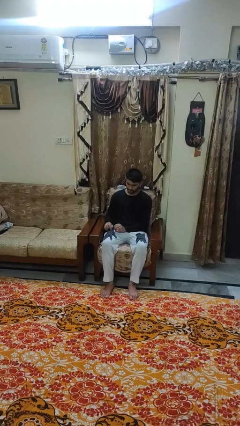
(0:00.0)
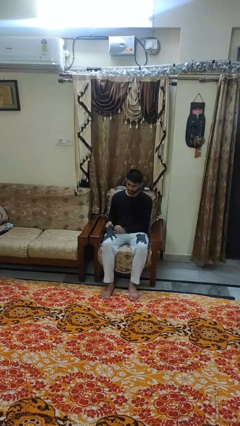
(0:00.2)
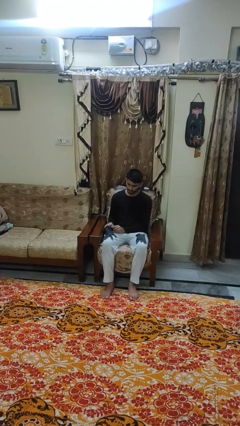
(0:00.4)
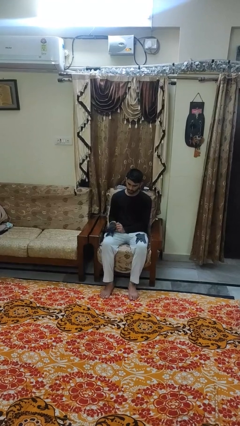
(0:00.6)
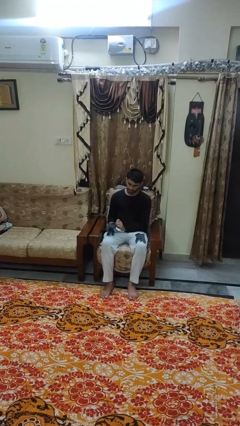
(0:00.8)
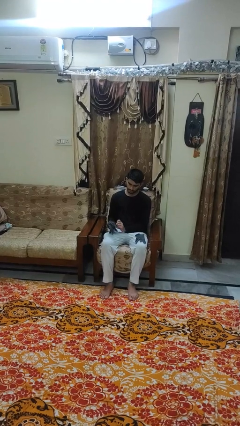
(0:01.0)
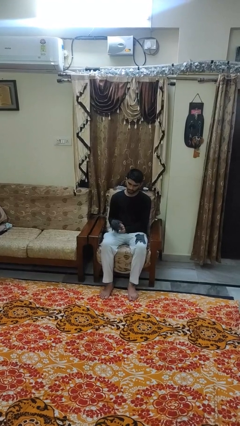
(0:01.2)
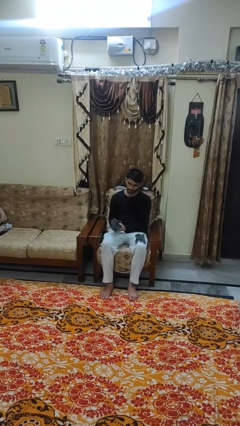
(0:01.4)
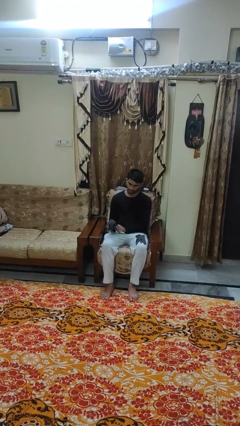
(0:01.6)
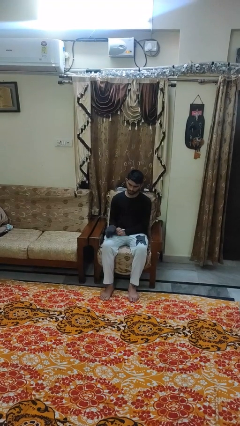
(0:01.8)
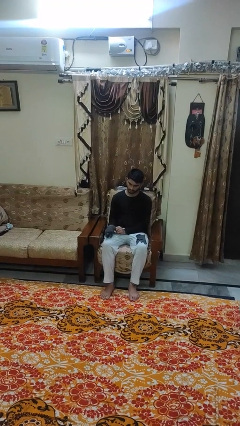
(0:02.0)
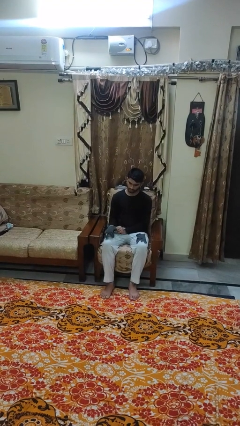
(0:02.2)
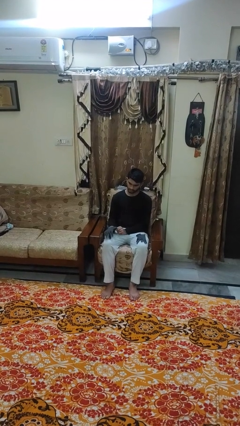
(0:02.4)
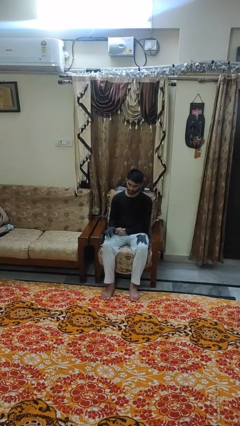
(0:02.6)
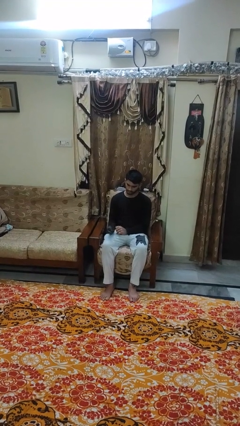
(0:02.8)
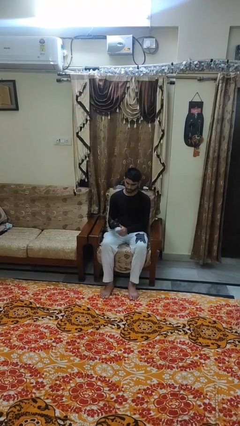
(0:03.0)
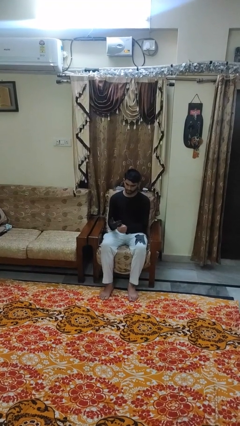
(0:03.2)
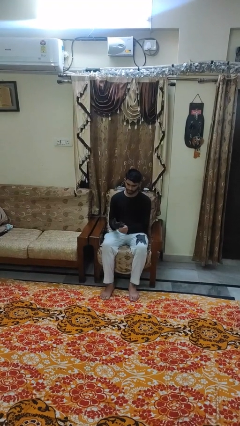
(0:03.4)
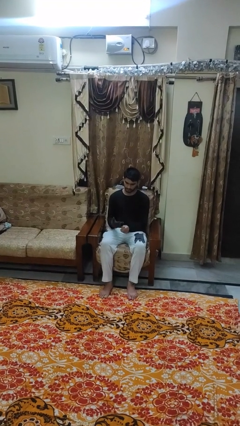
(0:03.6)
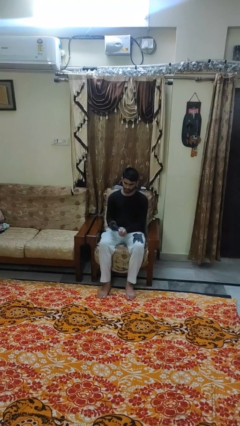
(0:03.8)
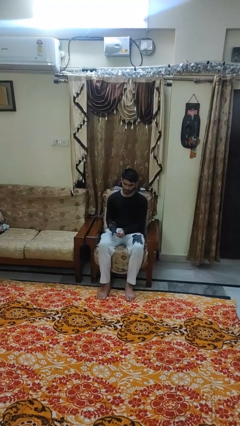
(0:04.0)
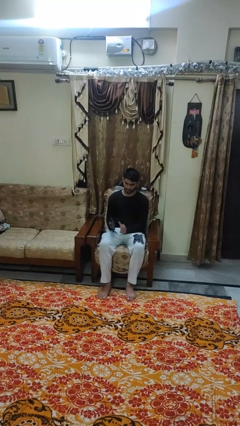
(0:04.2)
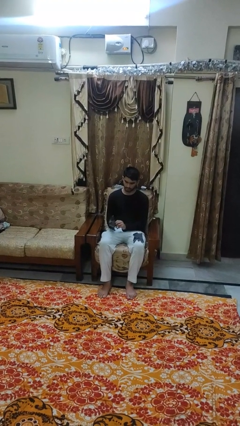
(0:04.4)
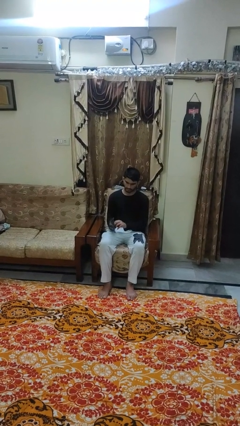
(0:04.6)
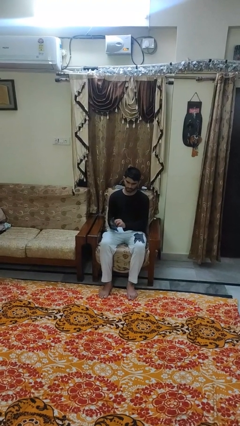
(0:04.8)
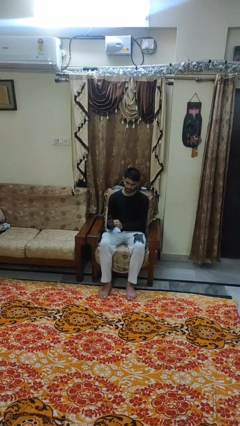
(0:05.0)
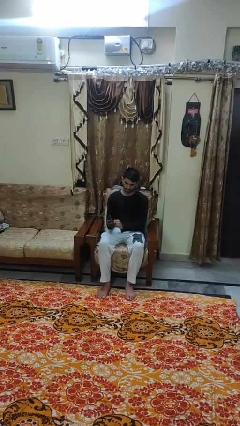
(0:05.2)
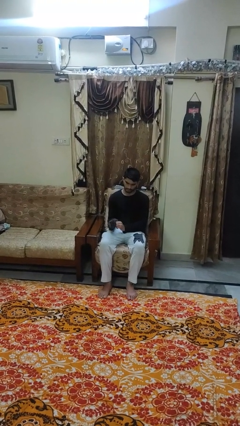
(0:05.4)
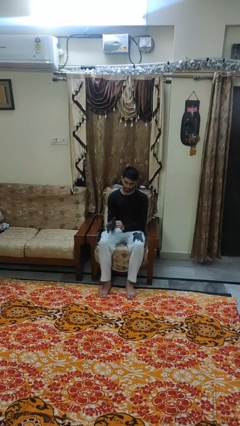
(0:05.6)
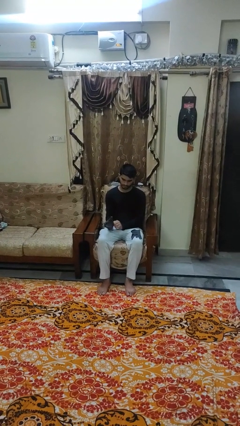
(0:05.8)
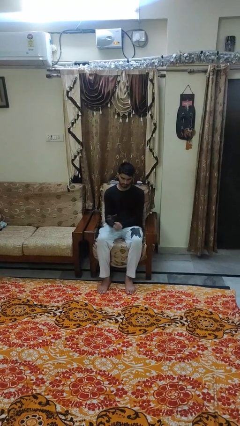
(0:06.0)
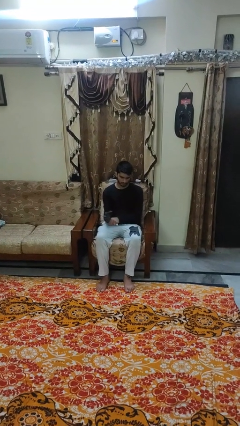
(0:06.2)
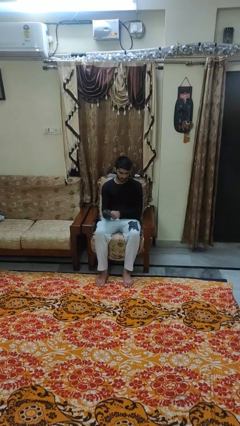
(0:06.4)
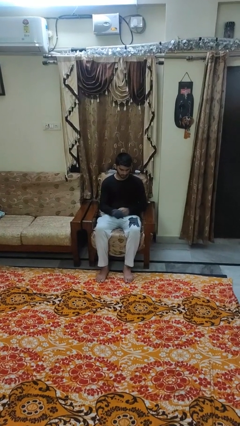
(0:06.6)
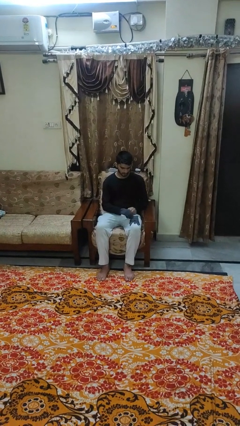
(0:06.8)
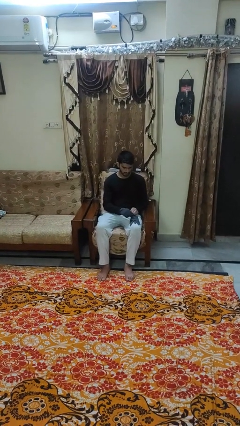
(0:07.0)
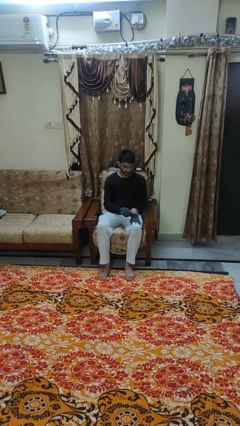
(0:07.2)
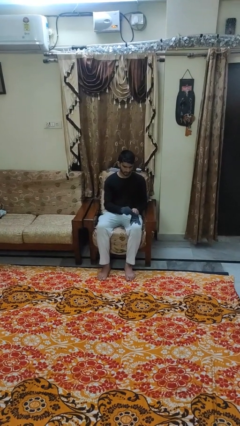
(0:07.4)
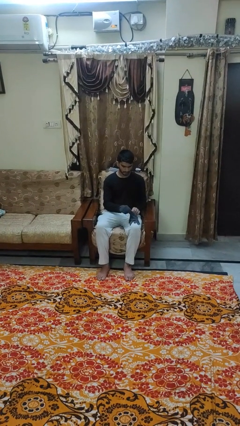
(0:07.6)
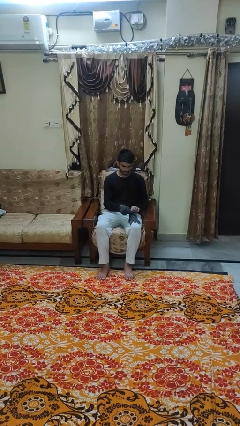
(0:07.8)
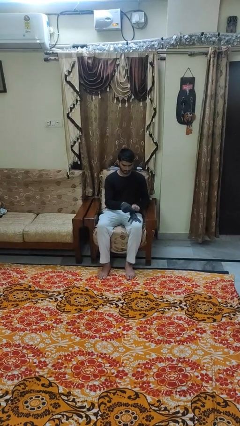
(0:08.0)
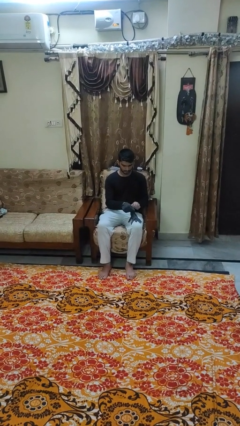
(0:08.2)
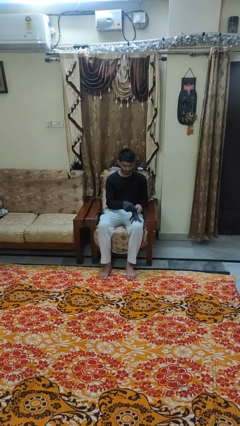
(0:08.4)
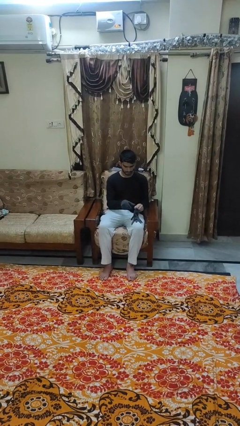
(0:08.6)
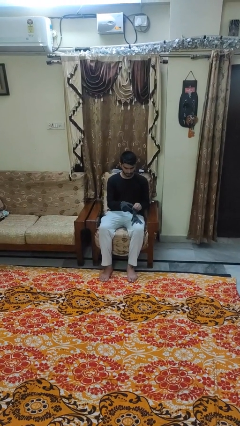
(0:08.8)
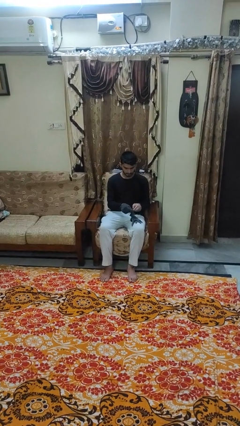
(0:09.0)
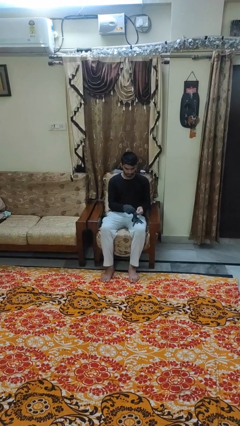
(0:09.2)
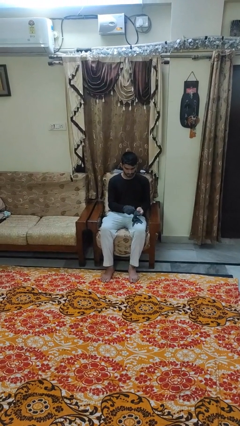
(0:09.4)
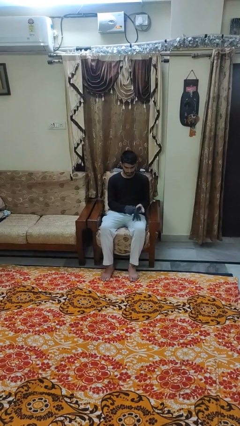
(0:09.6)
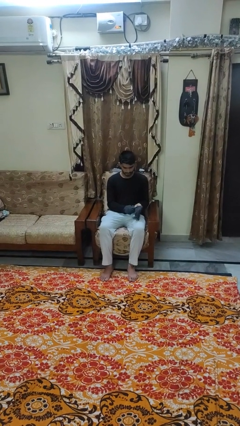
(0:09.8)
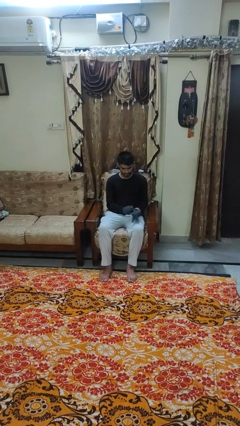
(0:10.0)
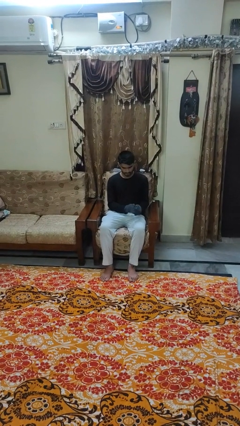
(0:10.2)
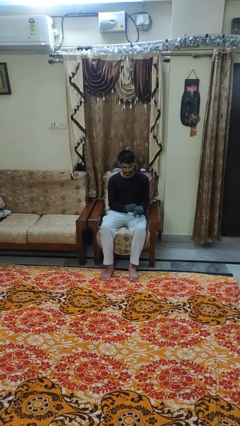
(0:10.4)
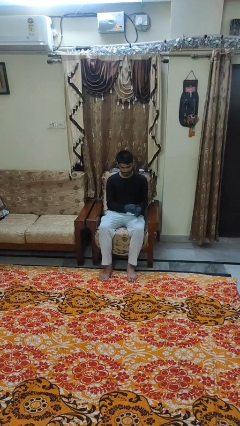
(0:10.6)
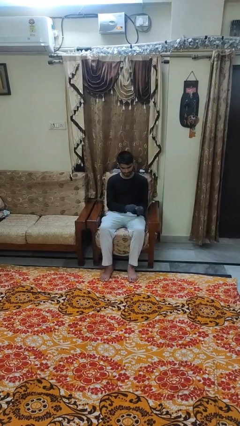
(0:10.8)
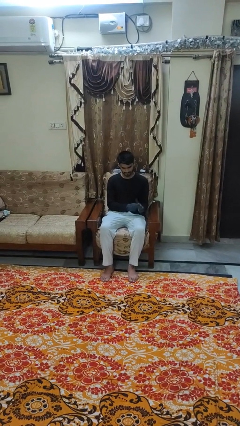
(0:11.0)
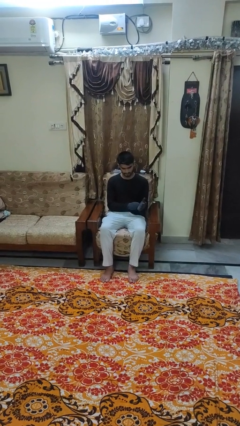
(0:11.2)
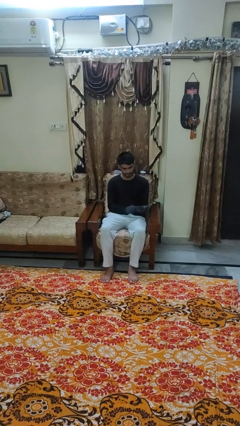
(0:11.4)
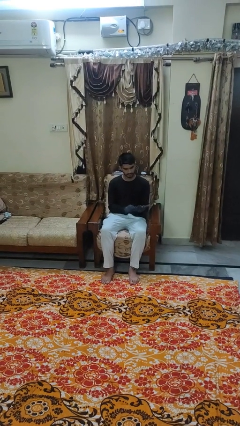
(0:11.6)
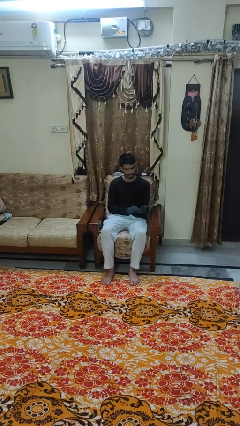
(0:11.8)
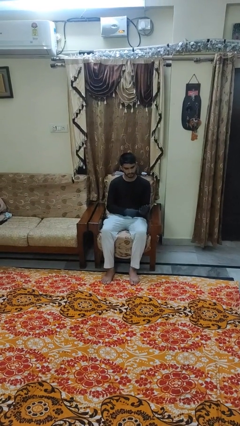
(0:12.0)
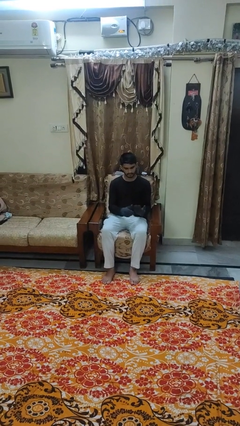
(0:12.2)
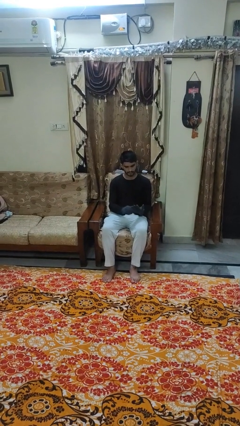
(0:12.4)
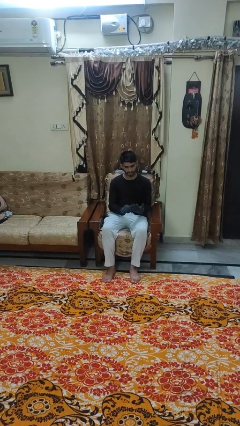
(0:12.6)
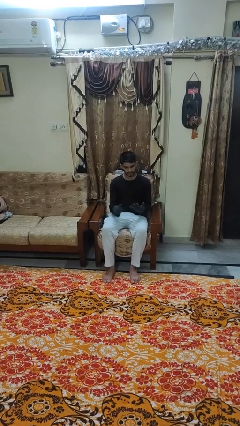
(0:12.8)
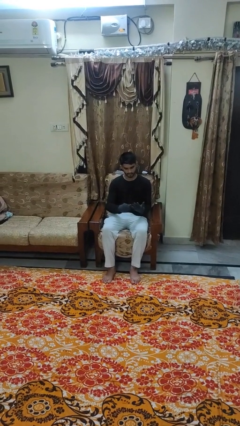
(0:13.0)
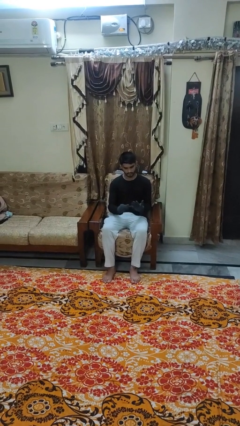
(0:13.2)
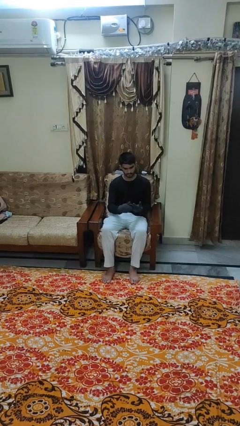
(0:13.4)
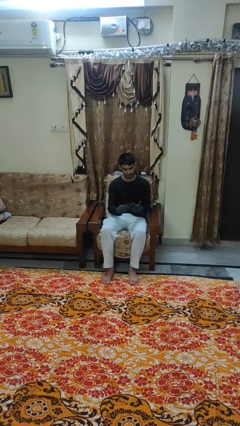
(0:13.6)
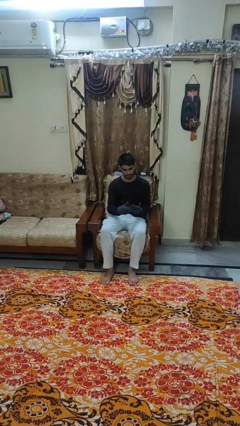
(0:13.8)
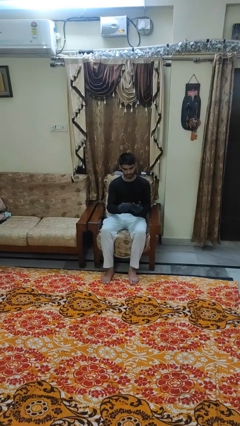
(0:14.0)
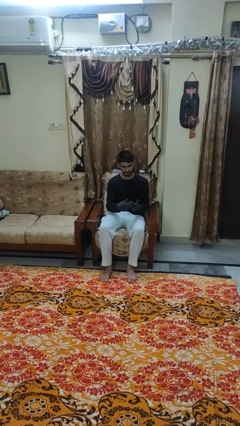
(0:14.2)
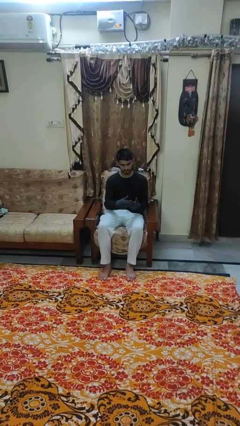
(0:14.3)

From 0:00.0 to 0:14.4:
person puts on gloves

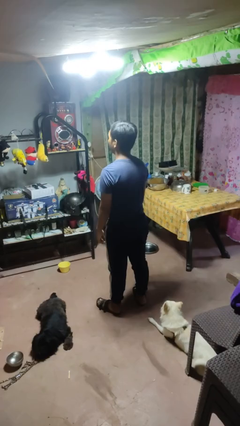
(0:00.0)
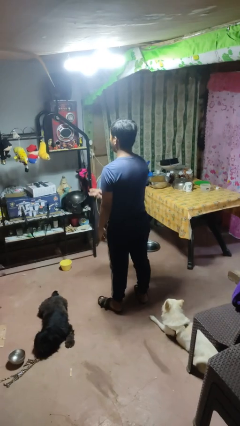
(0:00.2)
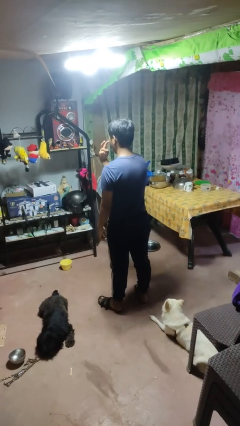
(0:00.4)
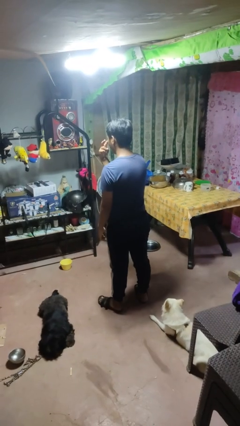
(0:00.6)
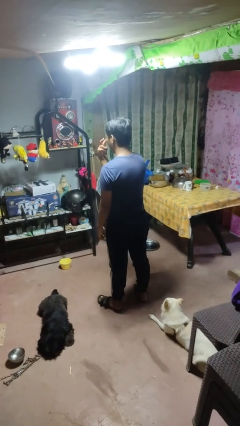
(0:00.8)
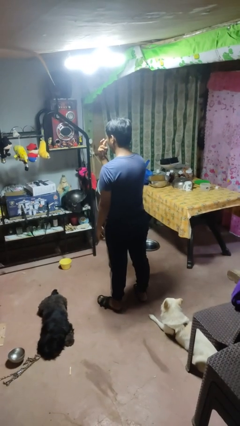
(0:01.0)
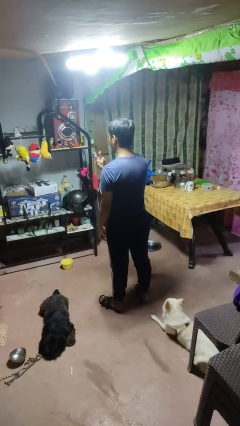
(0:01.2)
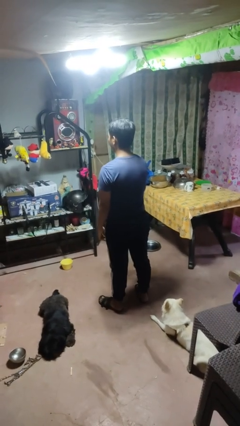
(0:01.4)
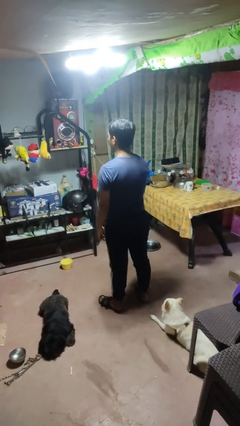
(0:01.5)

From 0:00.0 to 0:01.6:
person gestures watch closely

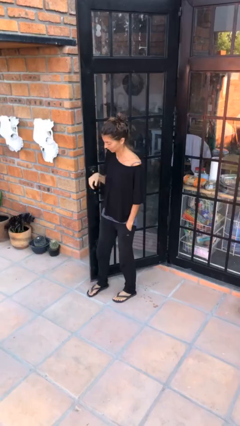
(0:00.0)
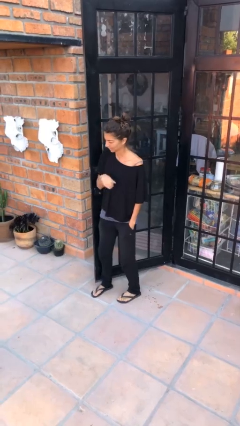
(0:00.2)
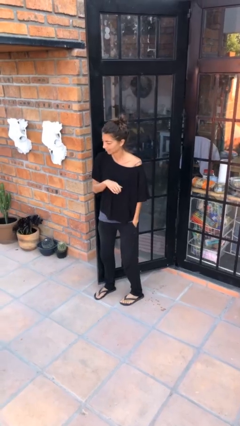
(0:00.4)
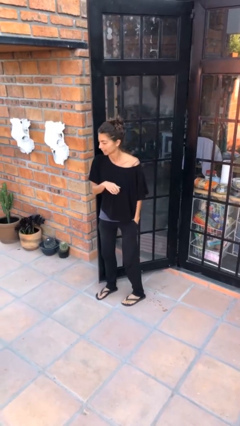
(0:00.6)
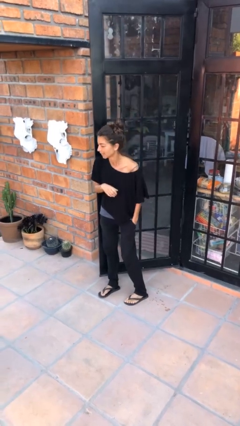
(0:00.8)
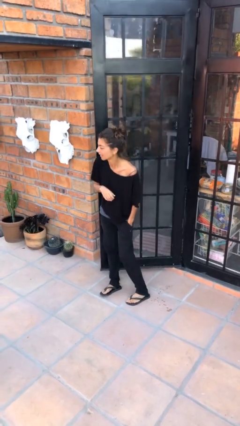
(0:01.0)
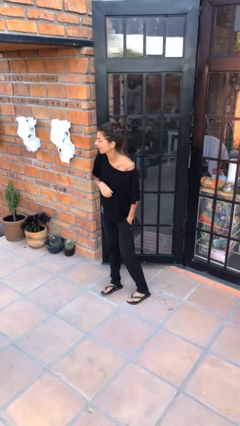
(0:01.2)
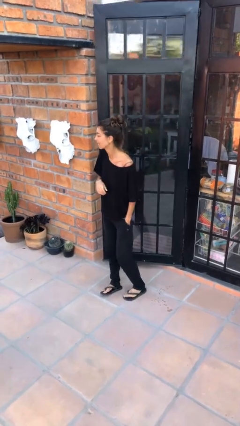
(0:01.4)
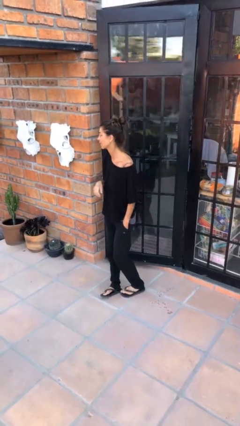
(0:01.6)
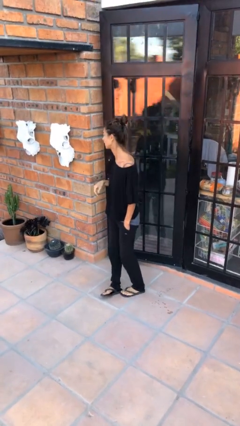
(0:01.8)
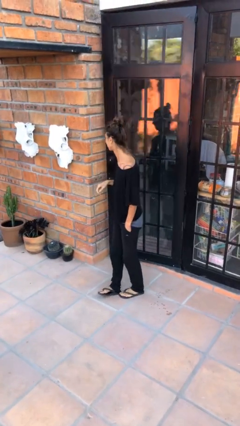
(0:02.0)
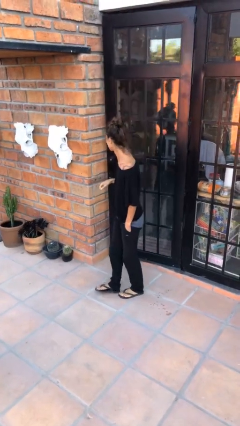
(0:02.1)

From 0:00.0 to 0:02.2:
person closes door with hip
